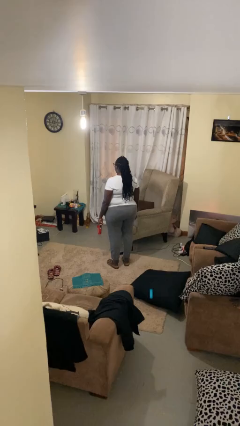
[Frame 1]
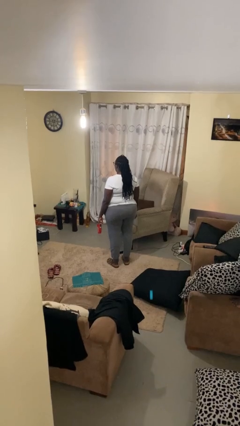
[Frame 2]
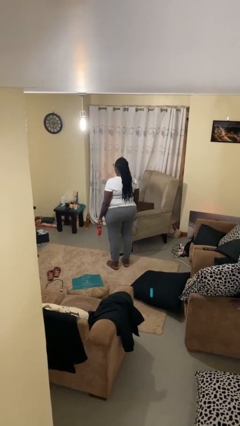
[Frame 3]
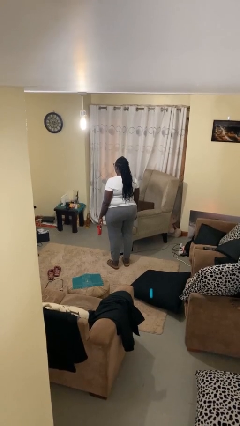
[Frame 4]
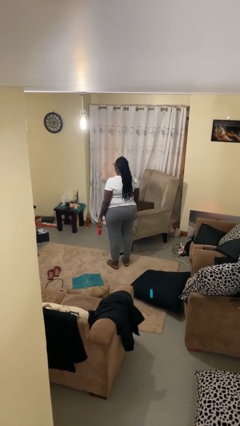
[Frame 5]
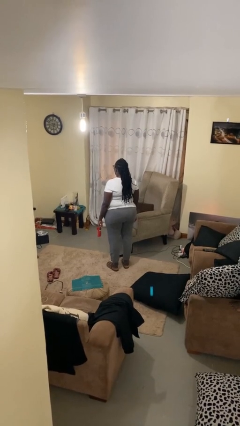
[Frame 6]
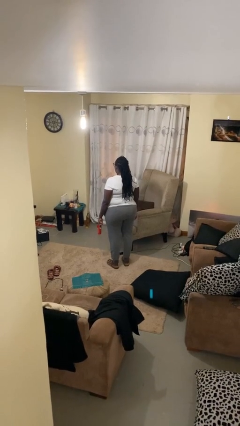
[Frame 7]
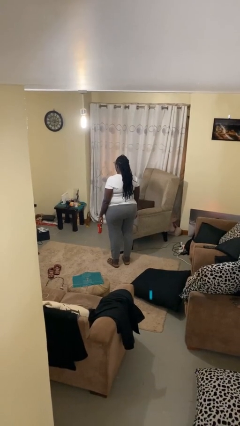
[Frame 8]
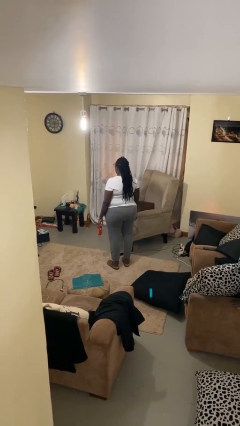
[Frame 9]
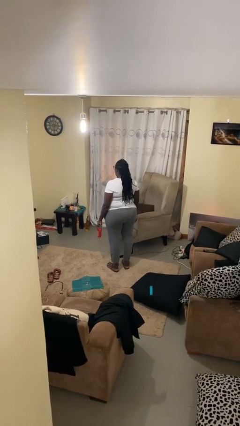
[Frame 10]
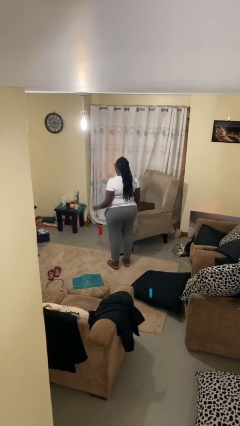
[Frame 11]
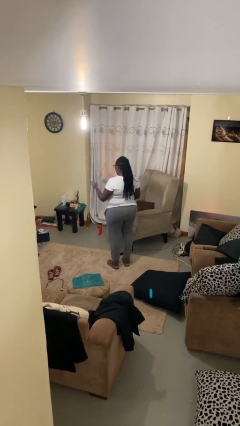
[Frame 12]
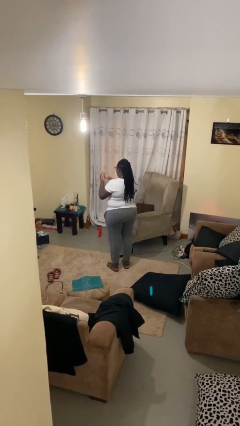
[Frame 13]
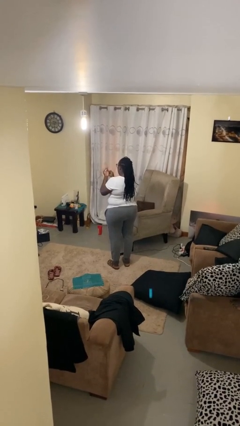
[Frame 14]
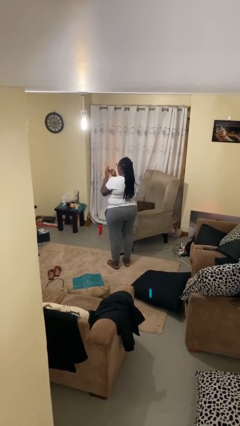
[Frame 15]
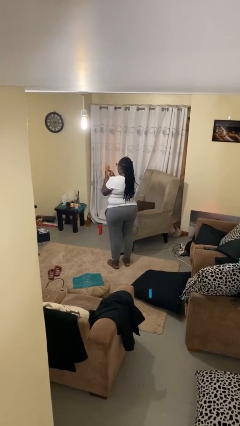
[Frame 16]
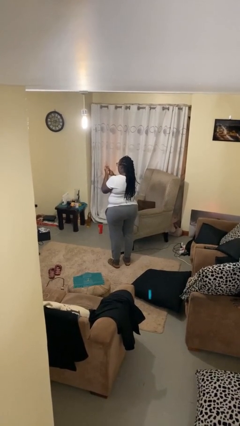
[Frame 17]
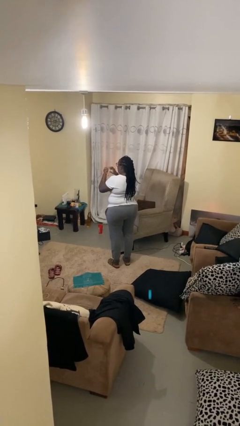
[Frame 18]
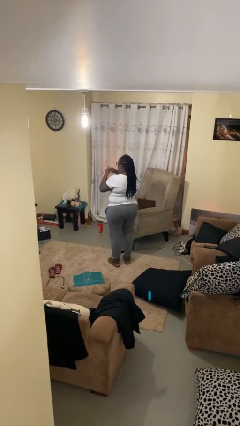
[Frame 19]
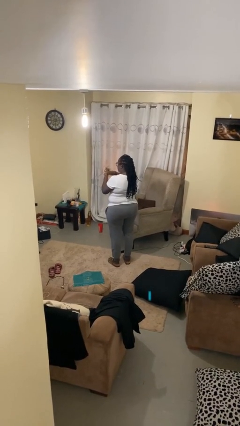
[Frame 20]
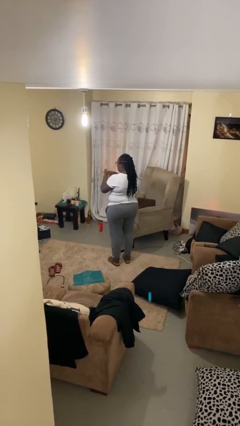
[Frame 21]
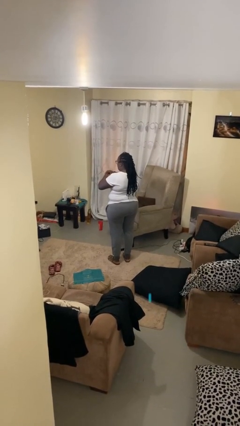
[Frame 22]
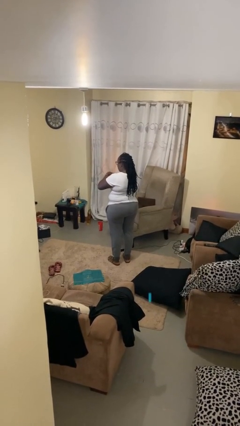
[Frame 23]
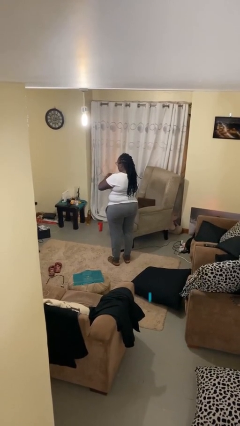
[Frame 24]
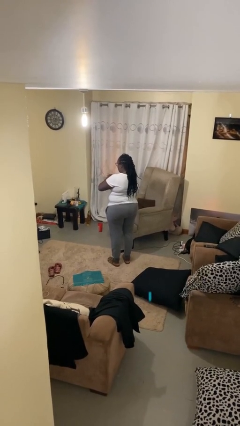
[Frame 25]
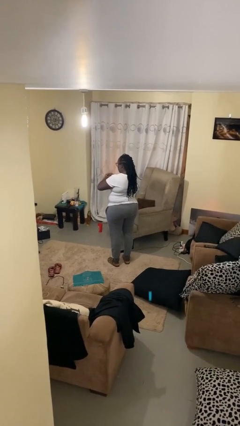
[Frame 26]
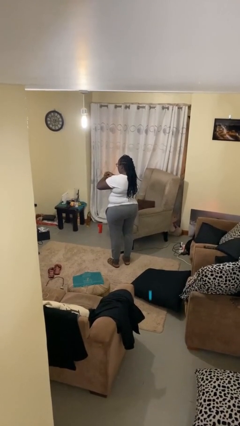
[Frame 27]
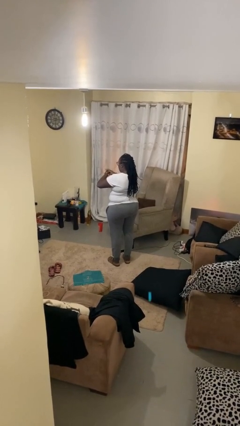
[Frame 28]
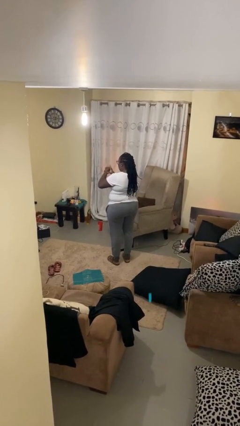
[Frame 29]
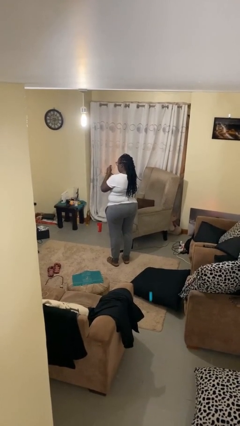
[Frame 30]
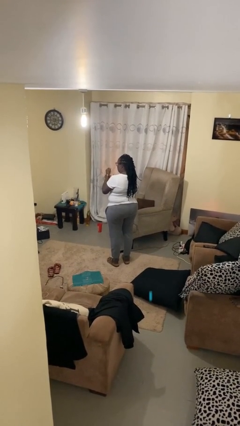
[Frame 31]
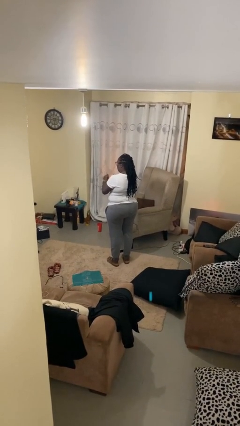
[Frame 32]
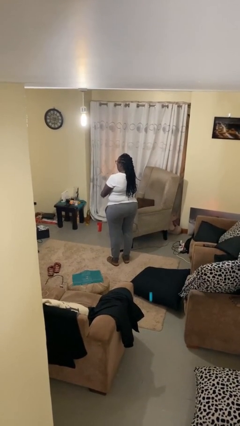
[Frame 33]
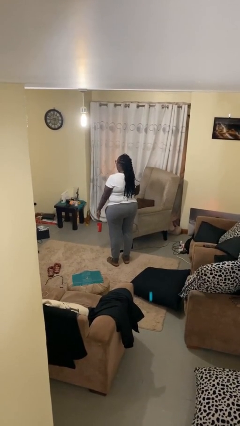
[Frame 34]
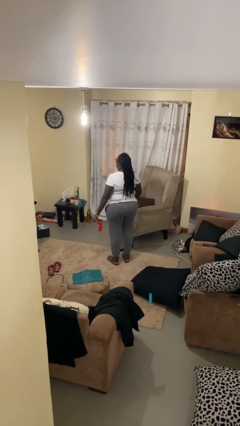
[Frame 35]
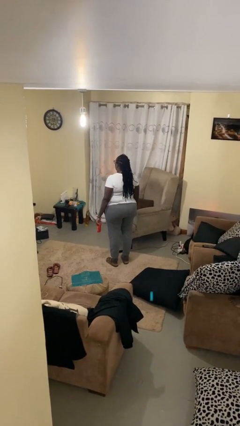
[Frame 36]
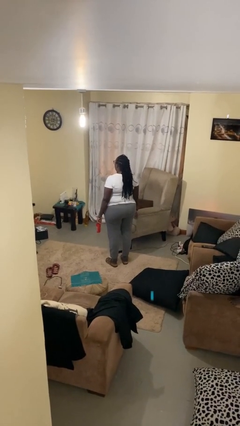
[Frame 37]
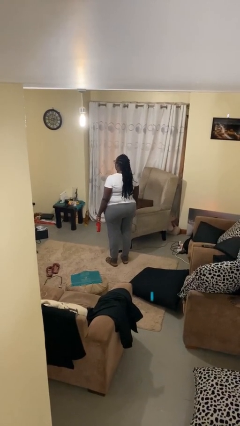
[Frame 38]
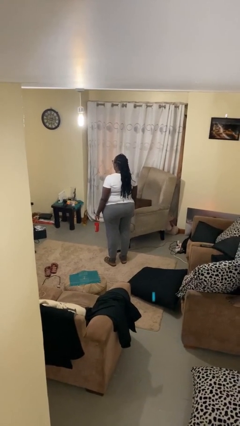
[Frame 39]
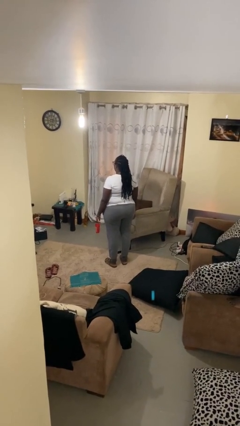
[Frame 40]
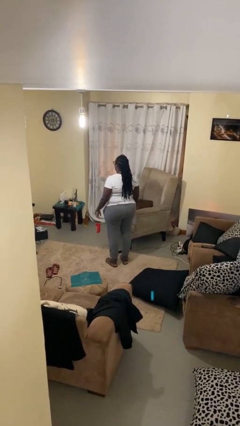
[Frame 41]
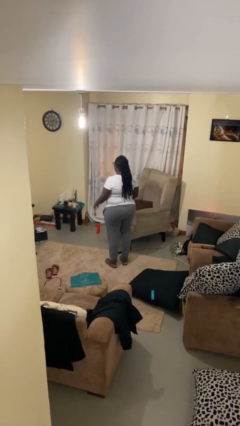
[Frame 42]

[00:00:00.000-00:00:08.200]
person puts on wristwatch

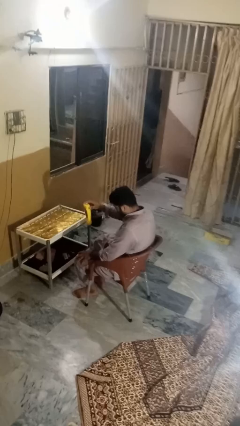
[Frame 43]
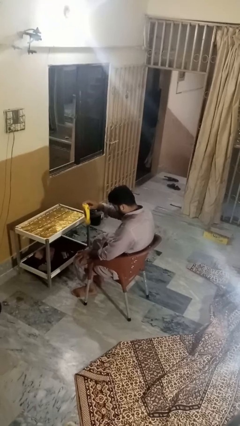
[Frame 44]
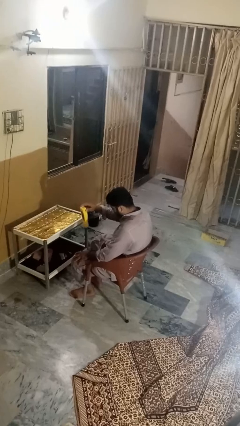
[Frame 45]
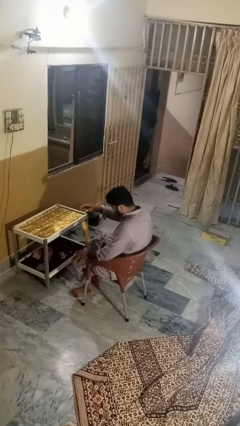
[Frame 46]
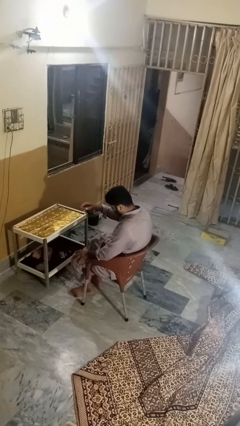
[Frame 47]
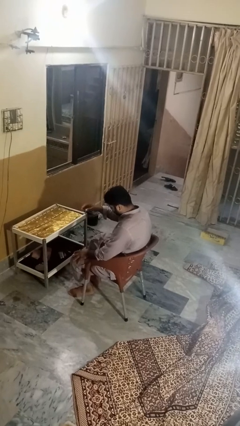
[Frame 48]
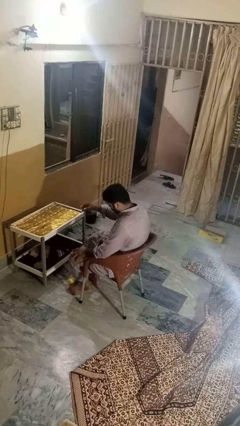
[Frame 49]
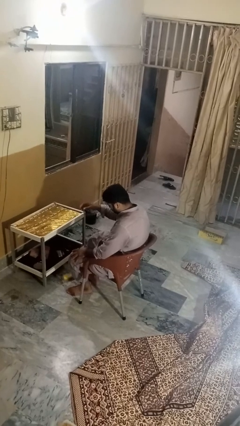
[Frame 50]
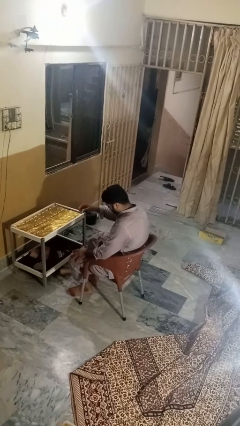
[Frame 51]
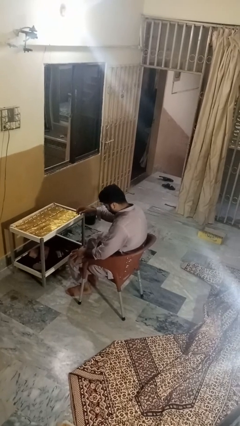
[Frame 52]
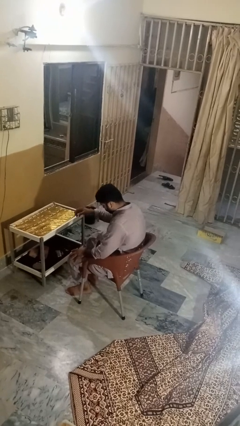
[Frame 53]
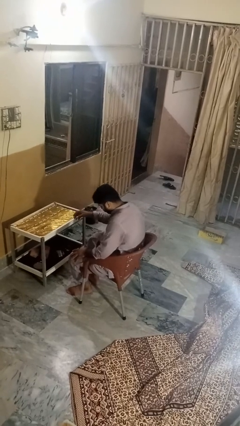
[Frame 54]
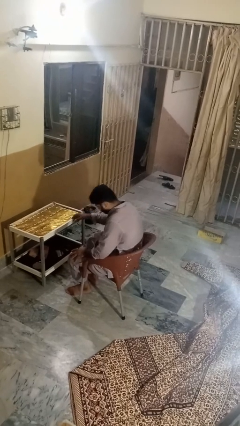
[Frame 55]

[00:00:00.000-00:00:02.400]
person throws object to ground

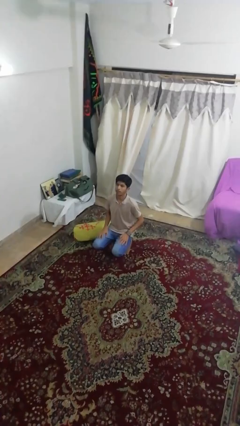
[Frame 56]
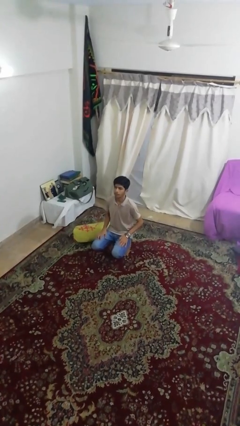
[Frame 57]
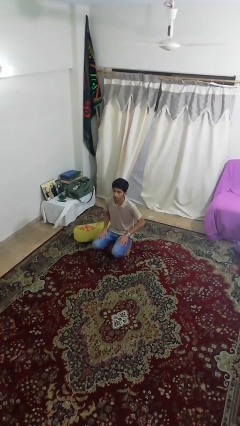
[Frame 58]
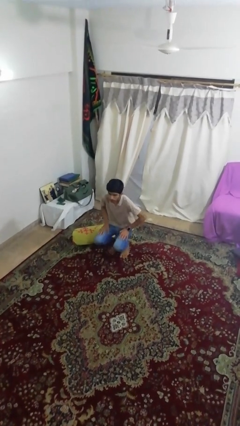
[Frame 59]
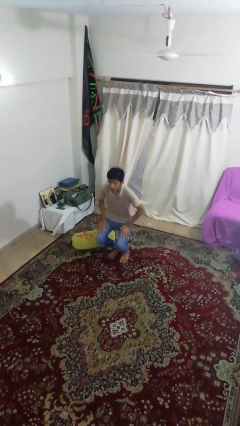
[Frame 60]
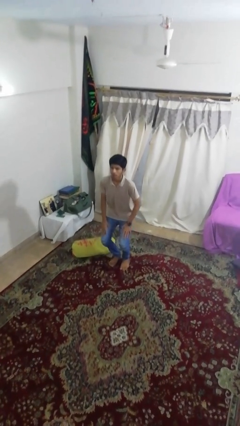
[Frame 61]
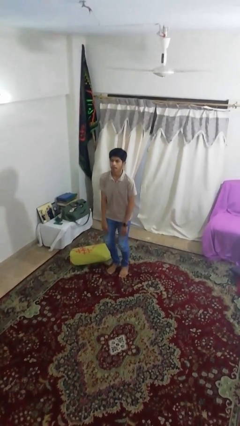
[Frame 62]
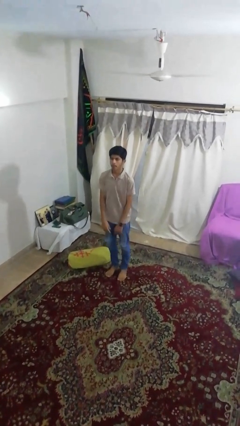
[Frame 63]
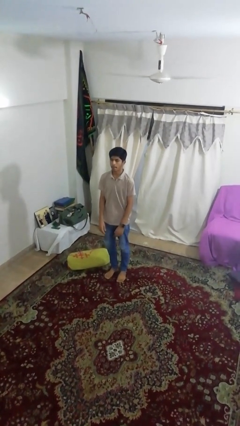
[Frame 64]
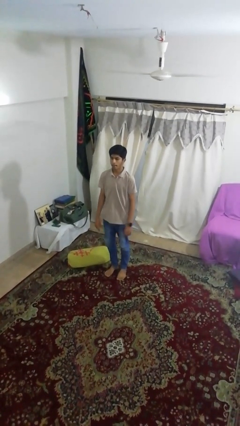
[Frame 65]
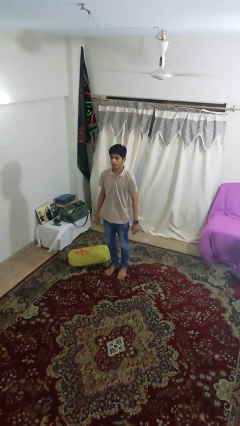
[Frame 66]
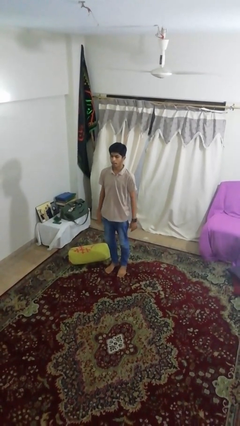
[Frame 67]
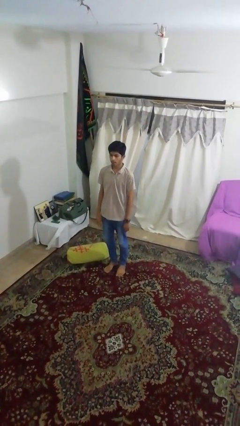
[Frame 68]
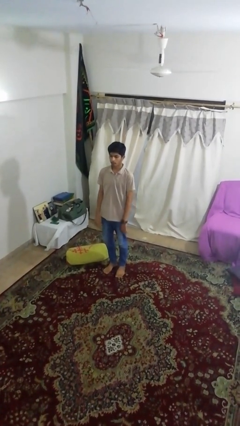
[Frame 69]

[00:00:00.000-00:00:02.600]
person stands up

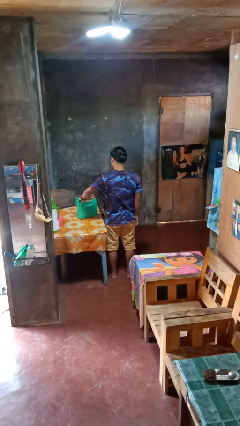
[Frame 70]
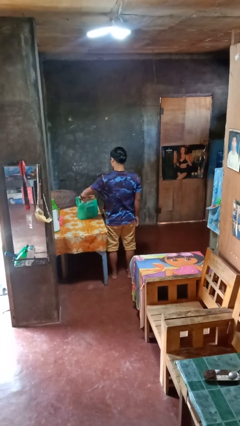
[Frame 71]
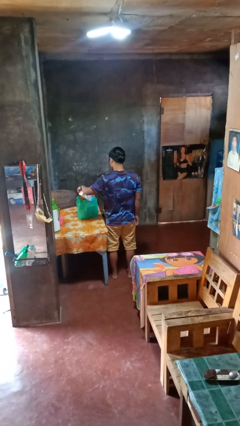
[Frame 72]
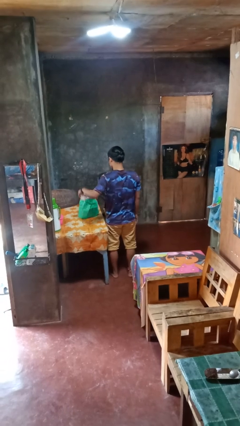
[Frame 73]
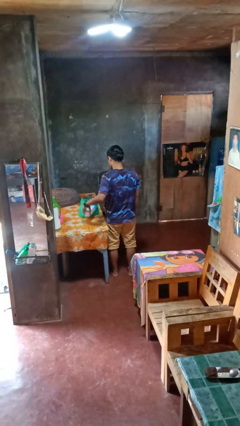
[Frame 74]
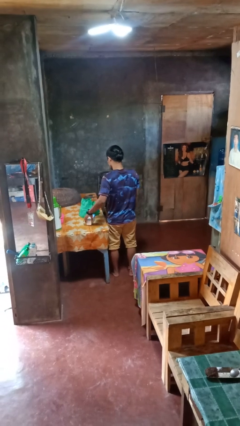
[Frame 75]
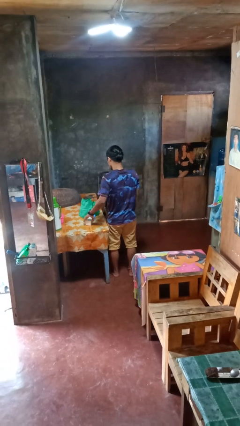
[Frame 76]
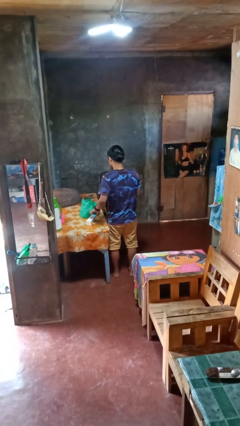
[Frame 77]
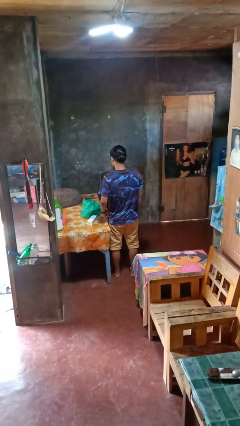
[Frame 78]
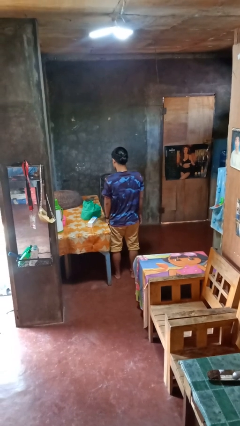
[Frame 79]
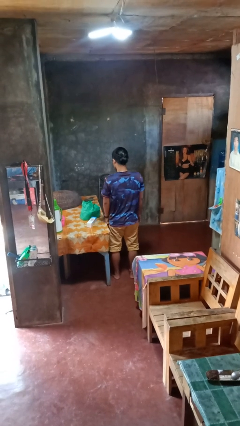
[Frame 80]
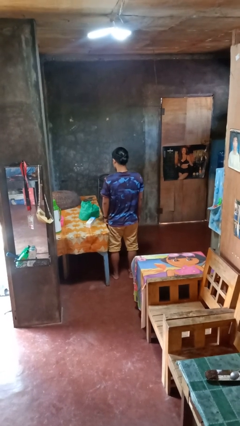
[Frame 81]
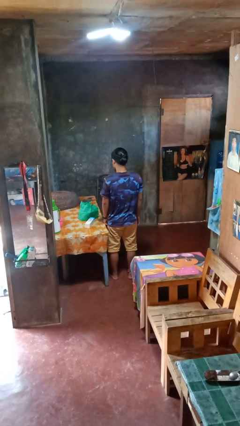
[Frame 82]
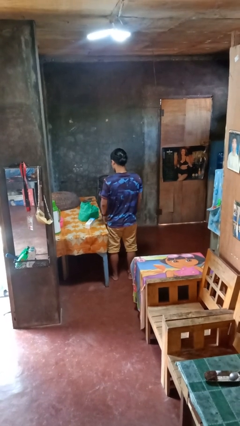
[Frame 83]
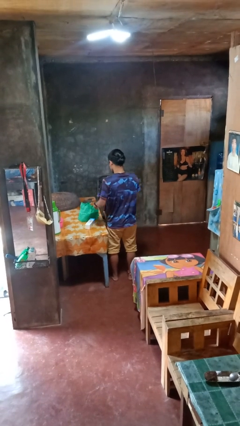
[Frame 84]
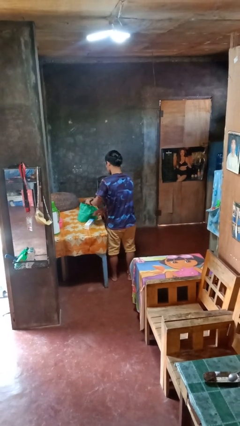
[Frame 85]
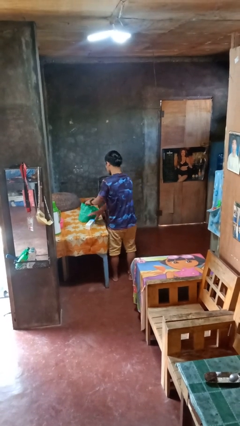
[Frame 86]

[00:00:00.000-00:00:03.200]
person takes object from bag

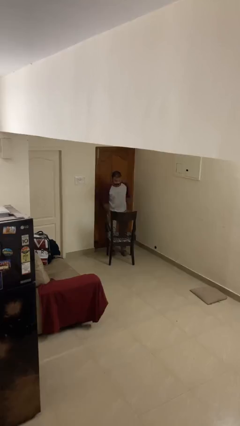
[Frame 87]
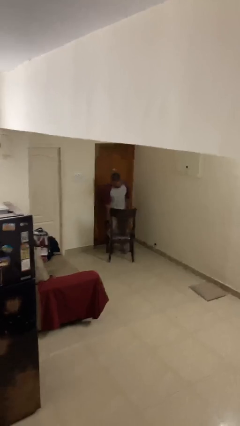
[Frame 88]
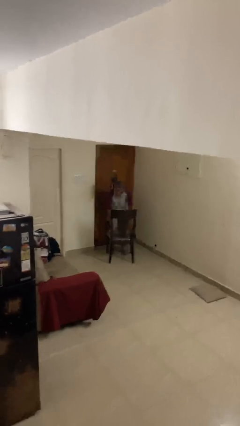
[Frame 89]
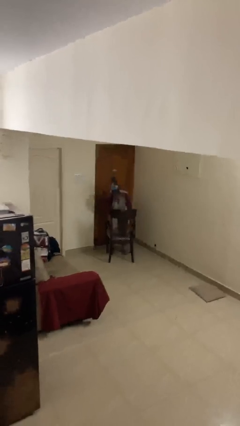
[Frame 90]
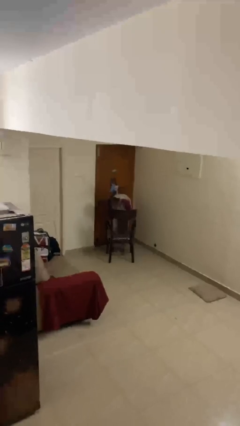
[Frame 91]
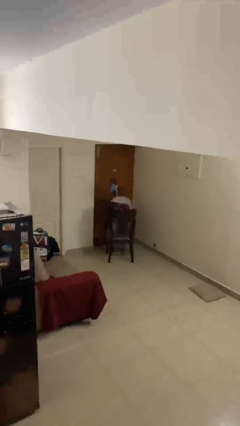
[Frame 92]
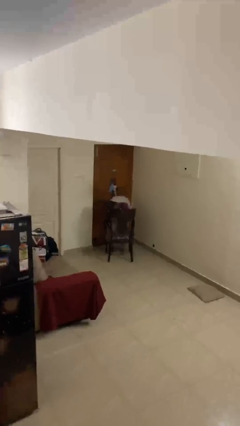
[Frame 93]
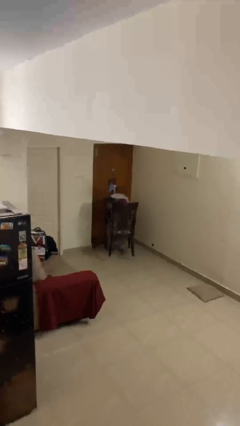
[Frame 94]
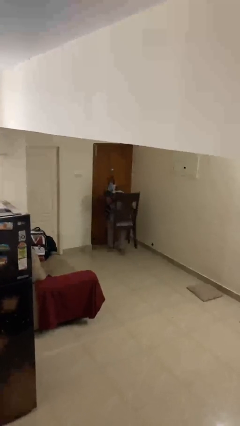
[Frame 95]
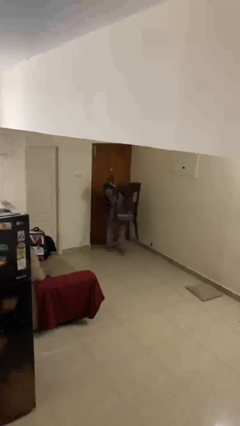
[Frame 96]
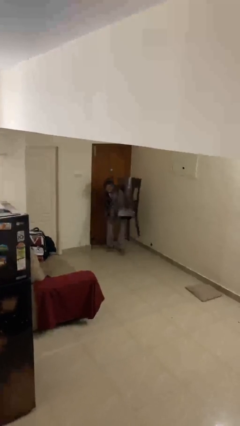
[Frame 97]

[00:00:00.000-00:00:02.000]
person picks up object from floor
